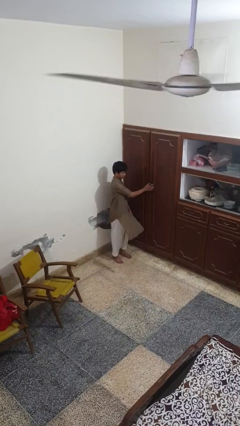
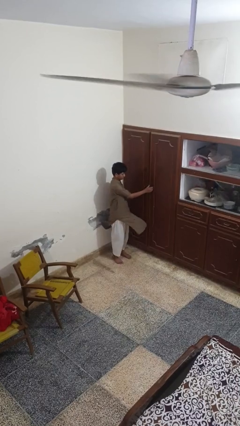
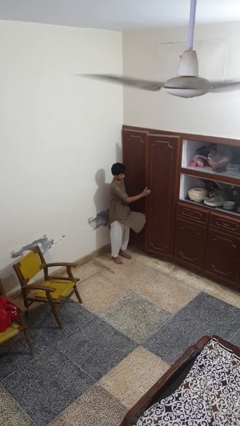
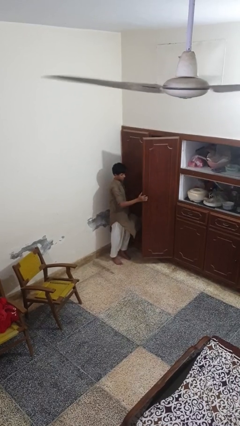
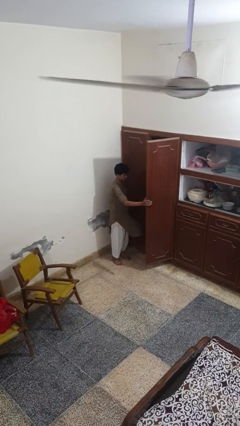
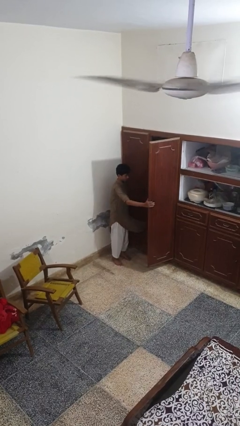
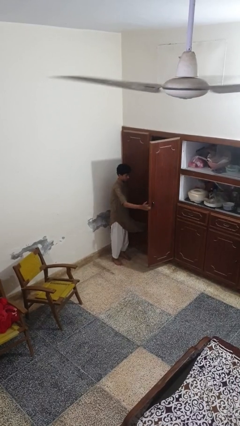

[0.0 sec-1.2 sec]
person opens closet door

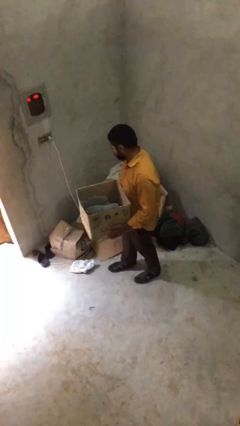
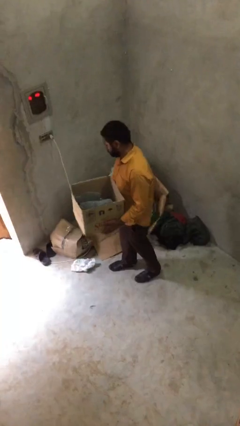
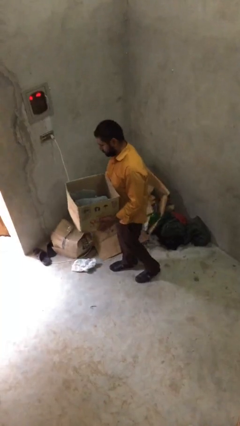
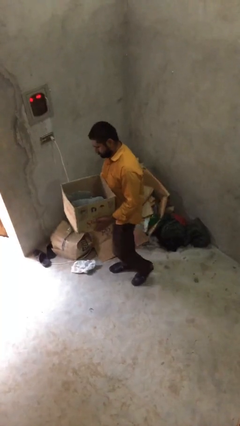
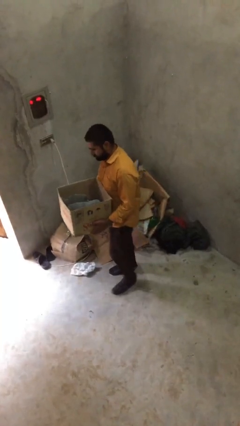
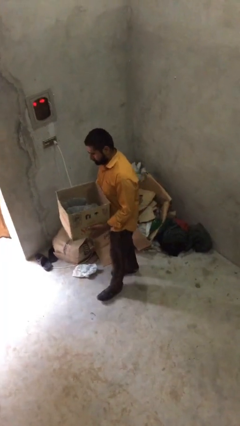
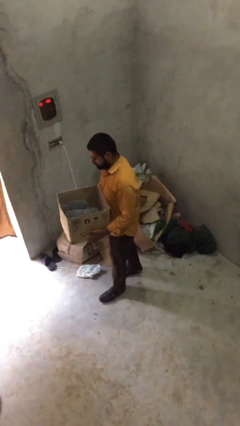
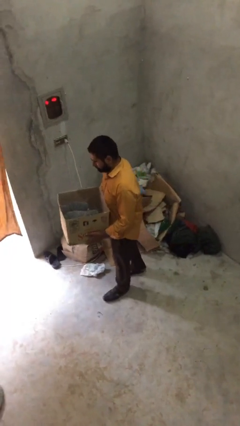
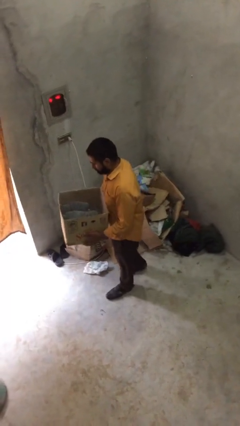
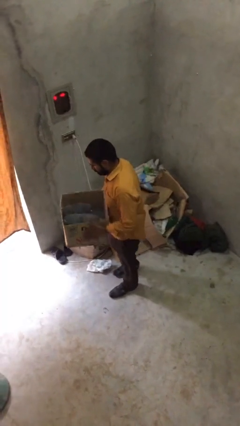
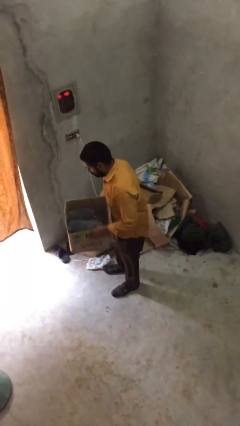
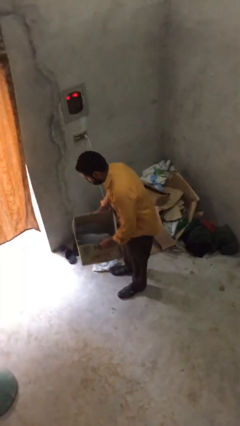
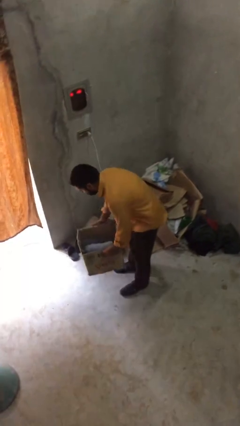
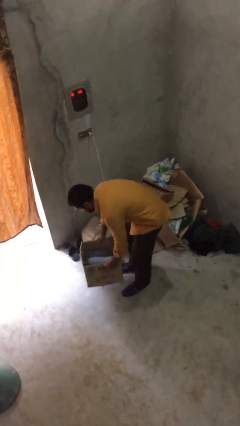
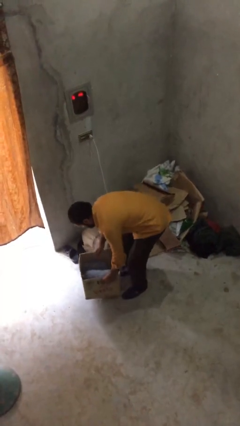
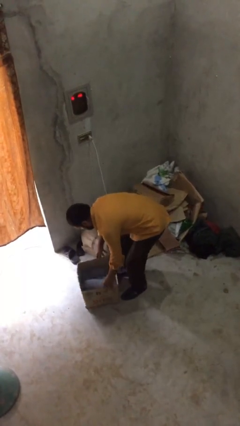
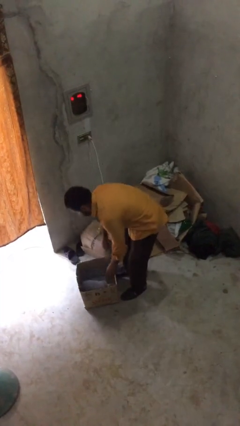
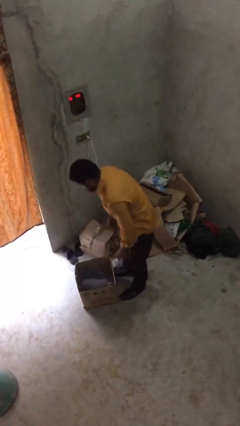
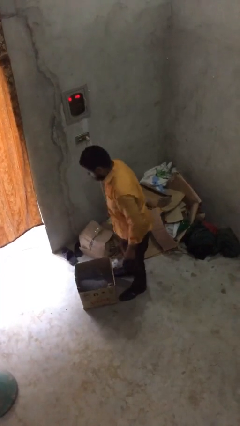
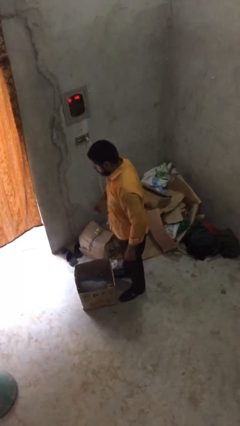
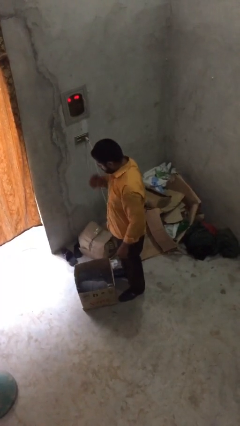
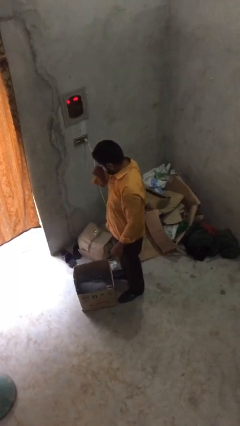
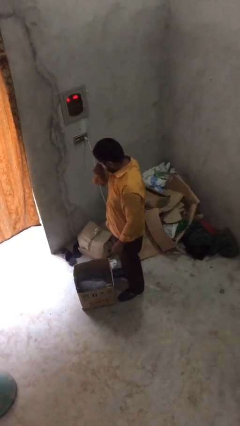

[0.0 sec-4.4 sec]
person puts down object on floor

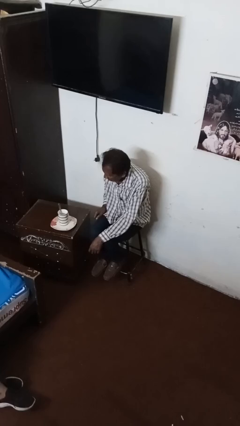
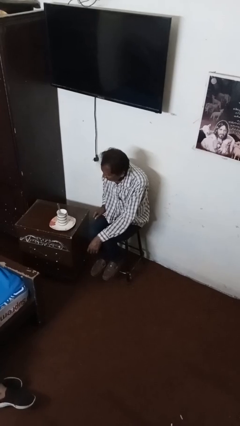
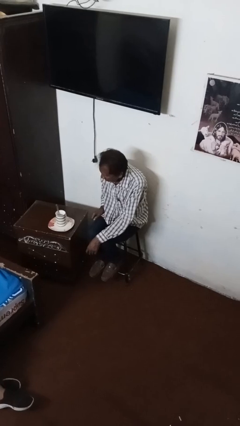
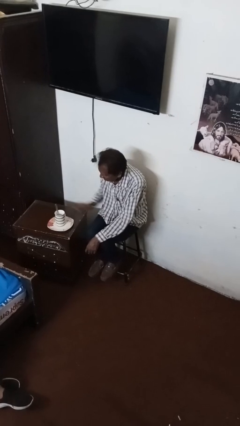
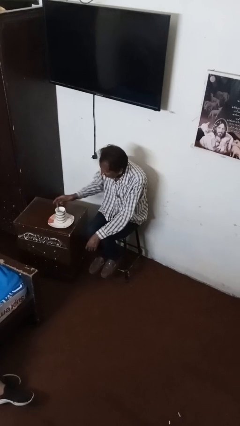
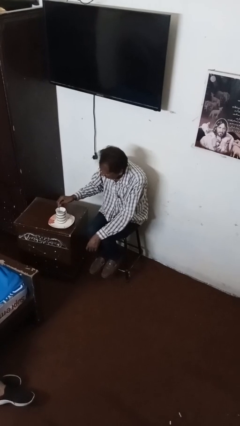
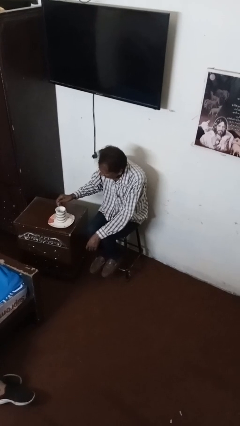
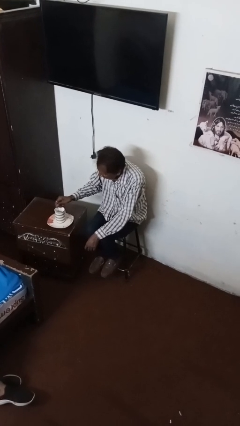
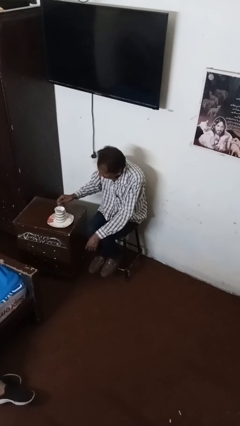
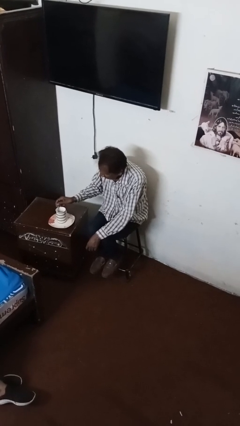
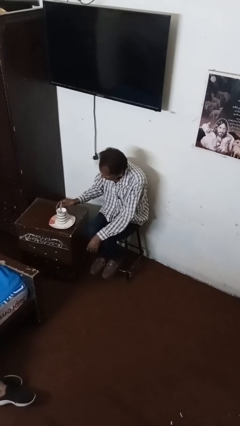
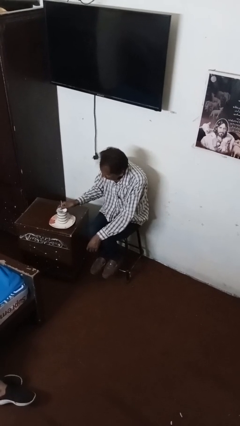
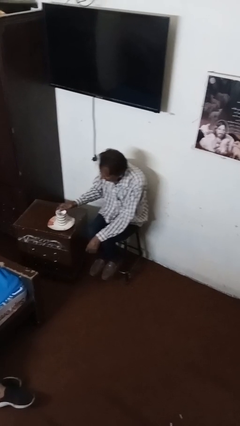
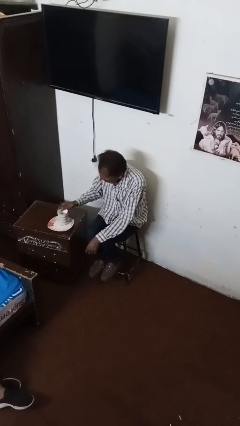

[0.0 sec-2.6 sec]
person stirs mug

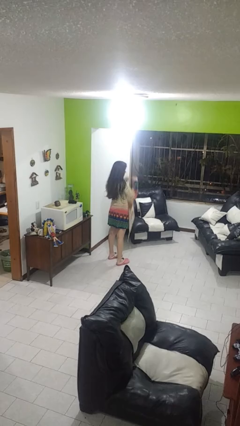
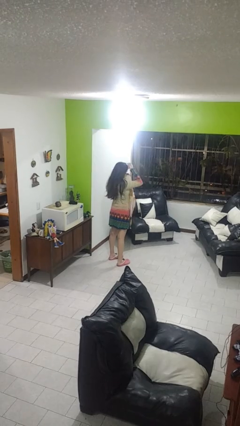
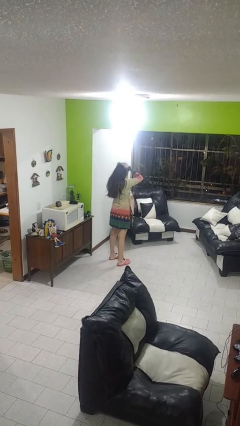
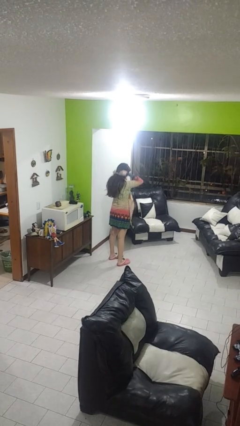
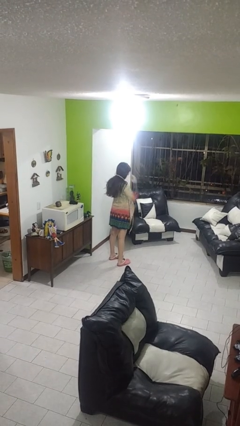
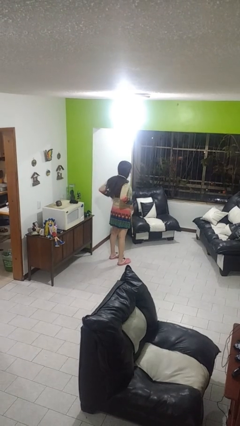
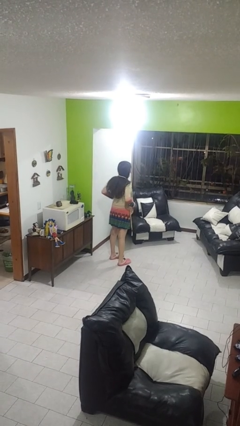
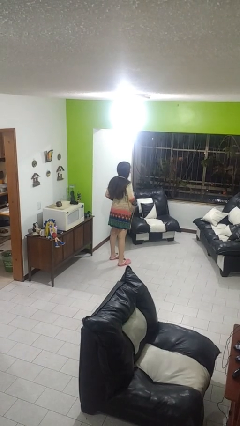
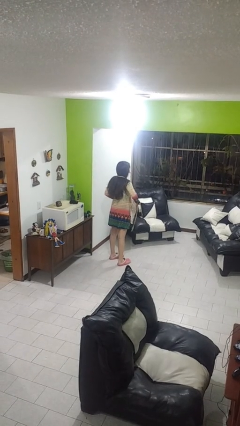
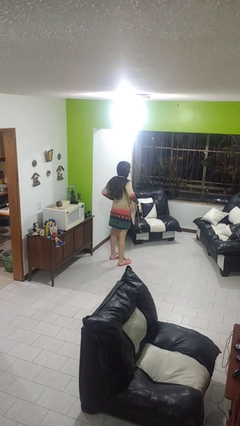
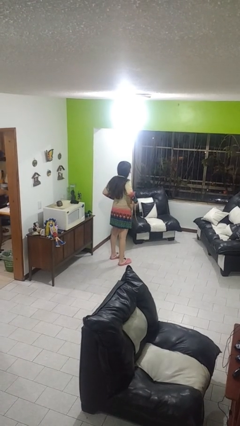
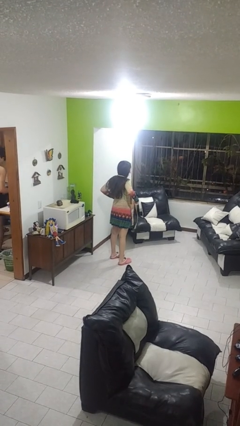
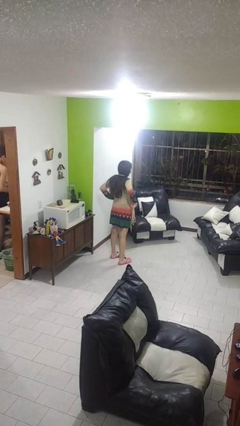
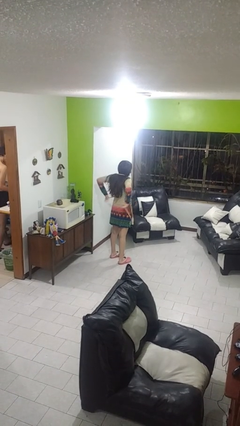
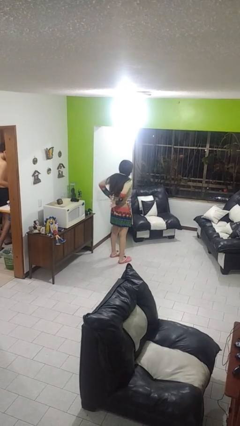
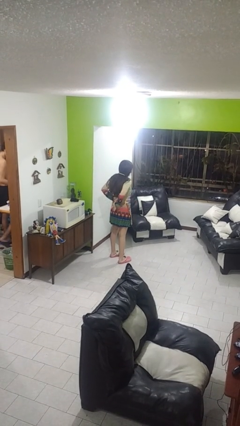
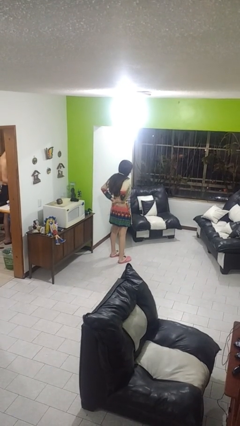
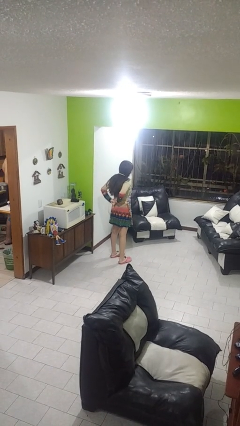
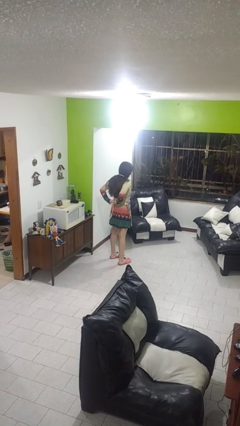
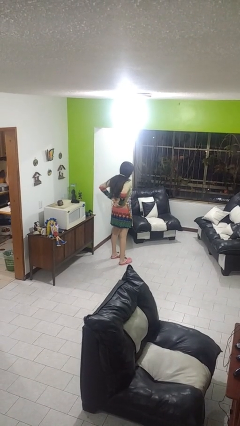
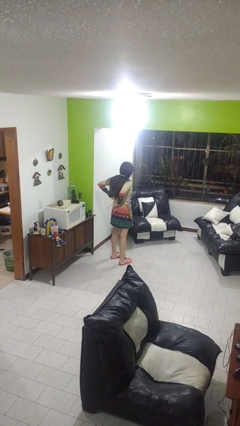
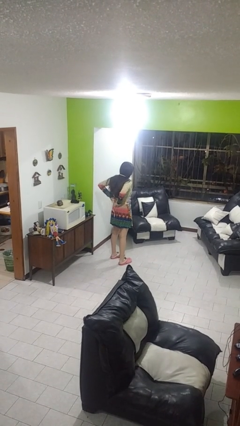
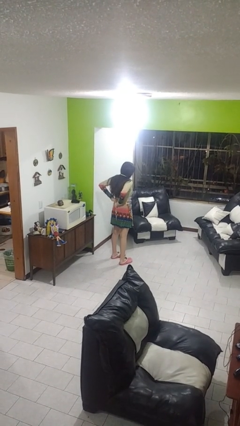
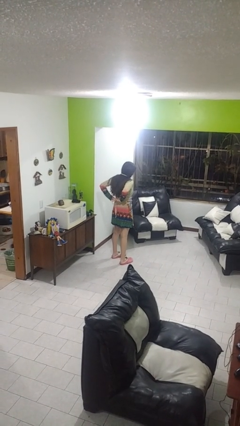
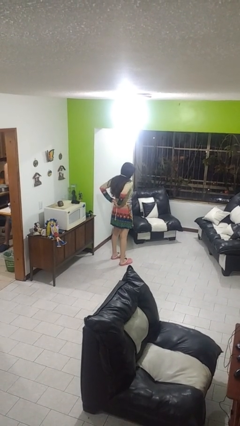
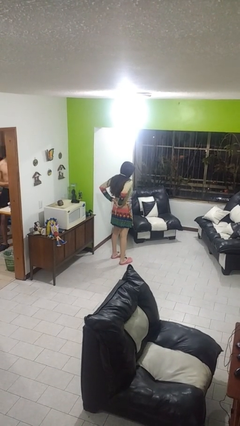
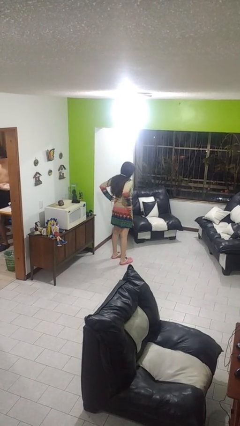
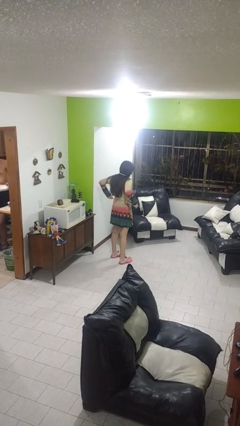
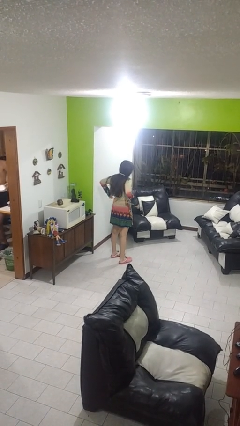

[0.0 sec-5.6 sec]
person puts on apron

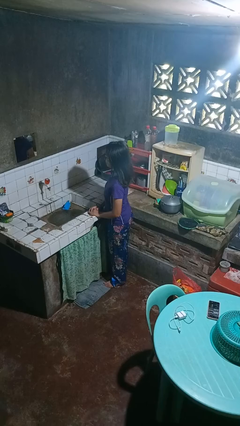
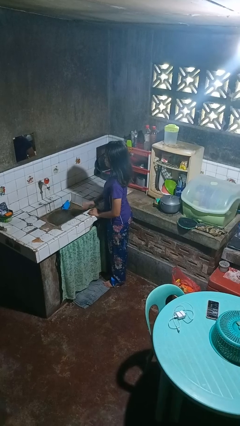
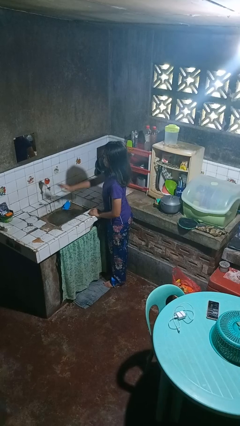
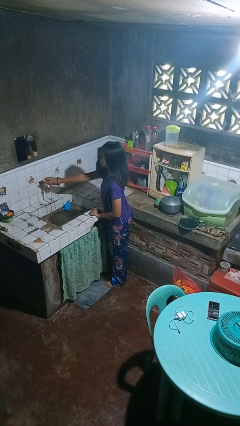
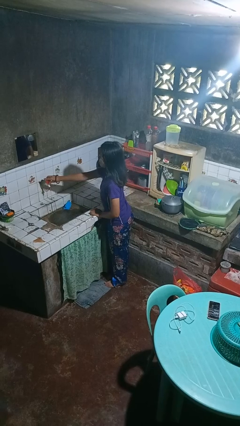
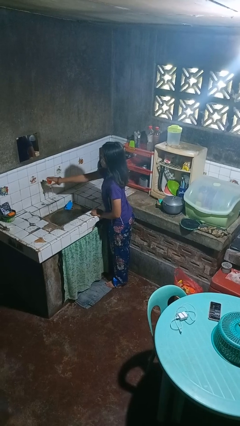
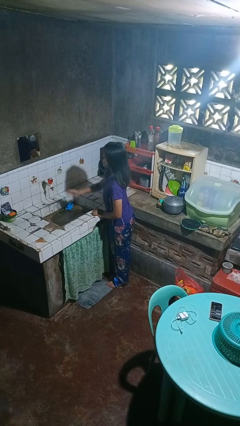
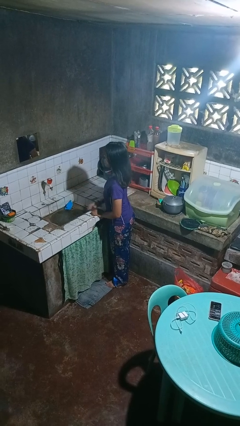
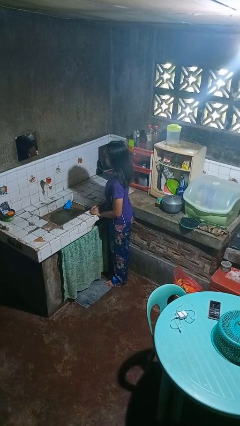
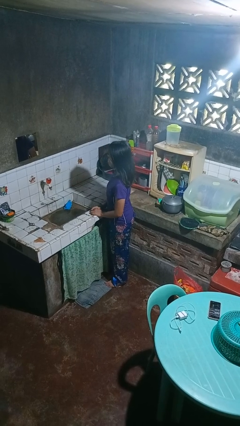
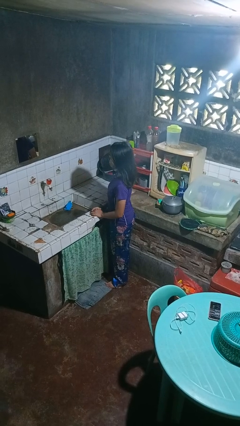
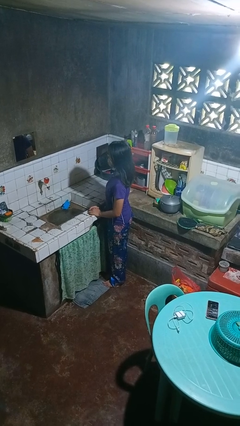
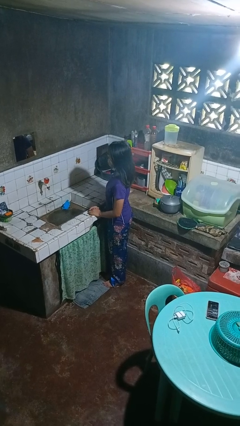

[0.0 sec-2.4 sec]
person turns off faucet

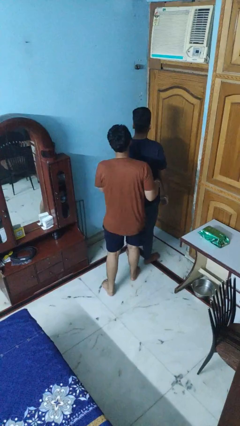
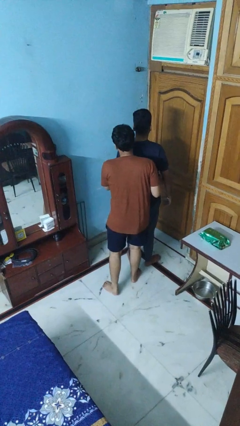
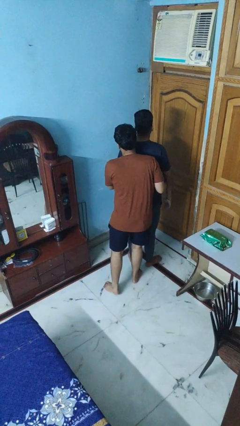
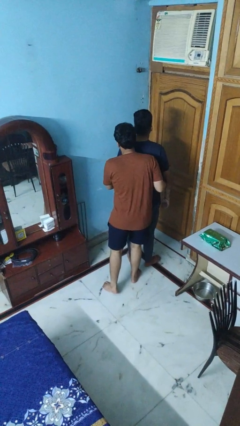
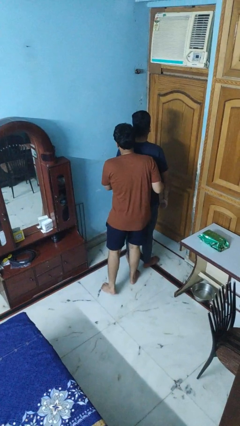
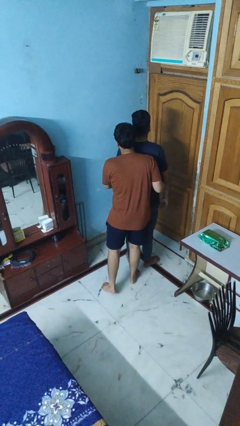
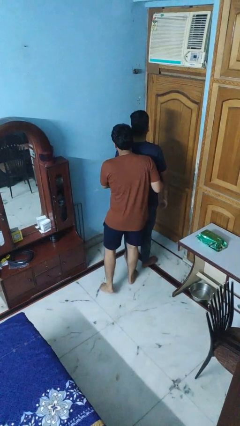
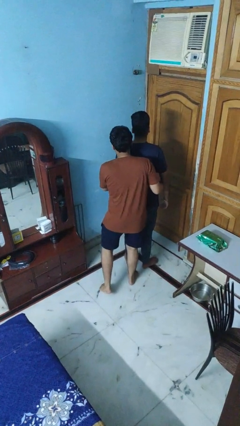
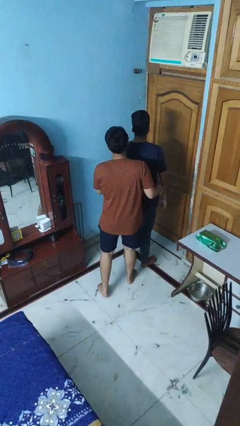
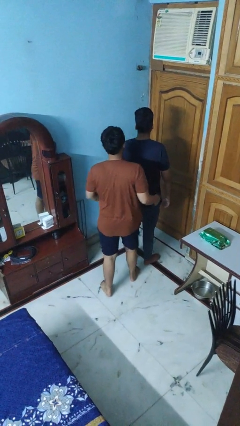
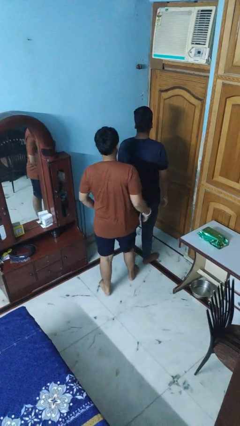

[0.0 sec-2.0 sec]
person hugs person from behind
